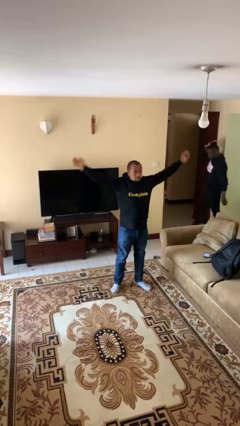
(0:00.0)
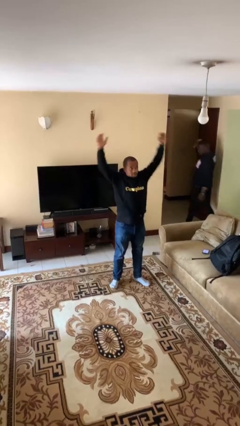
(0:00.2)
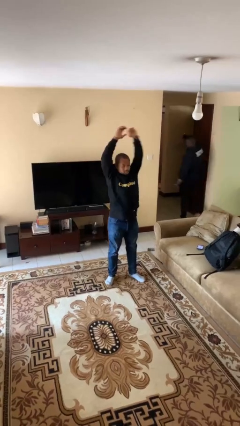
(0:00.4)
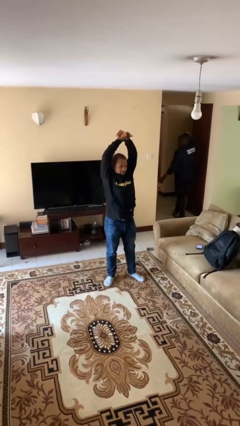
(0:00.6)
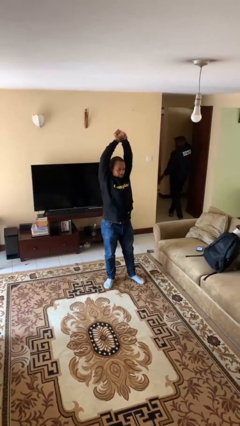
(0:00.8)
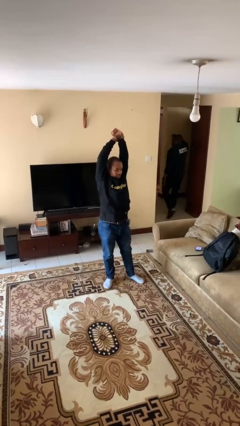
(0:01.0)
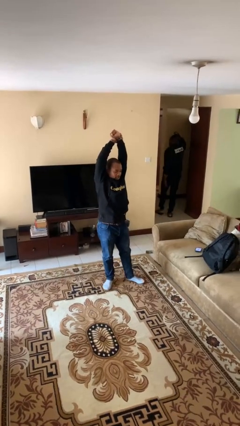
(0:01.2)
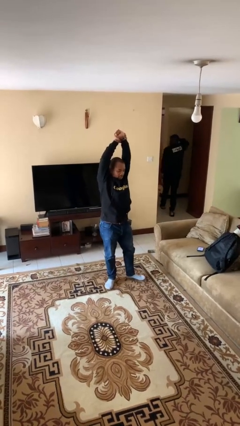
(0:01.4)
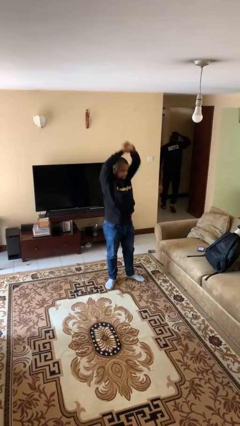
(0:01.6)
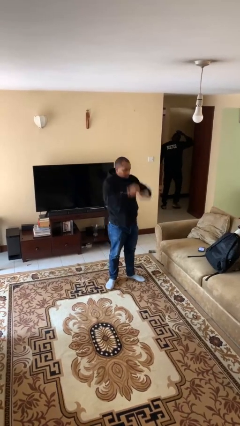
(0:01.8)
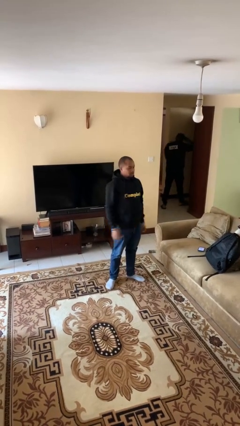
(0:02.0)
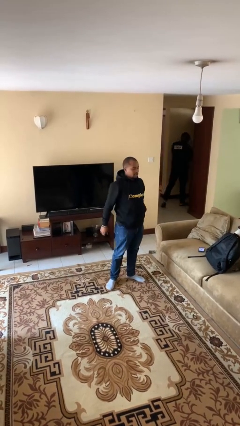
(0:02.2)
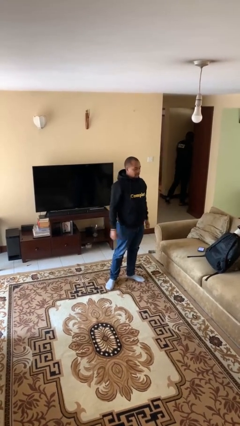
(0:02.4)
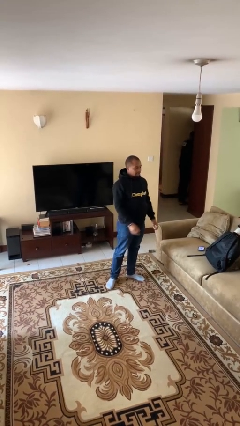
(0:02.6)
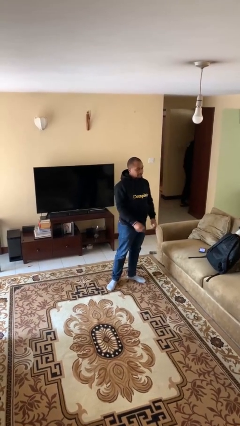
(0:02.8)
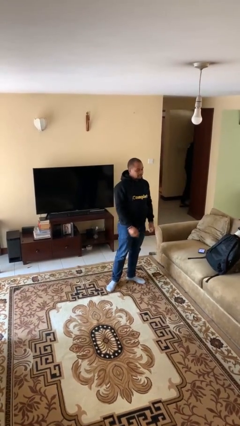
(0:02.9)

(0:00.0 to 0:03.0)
person stretches arms over head

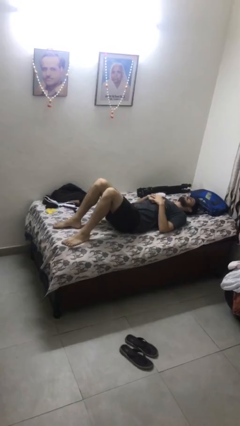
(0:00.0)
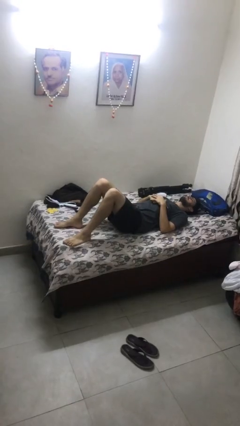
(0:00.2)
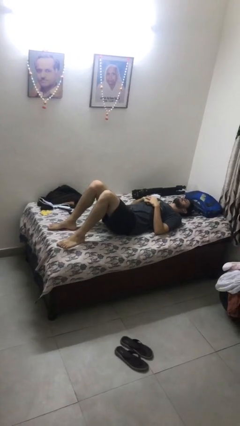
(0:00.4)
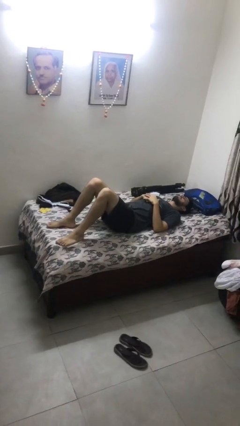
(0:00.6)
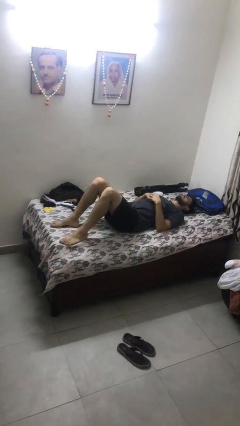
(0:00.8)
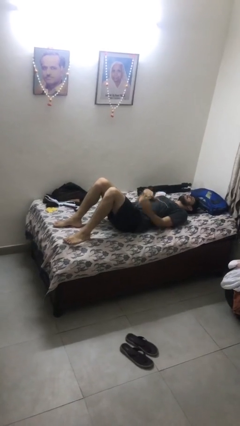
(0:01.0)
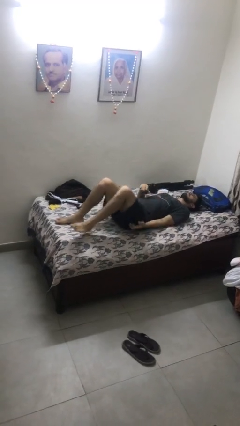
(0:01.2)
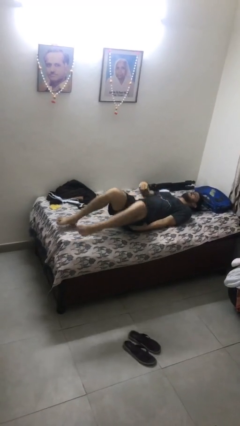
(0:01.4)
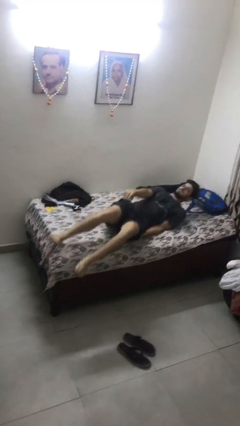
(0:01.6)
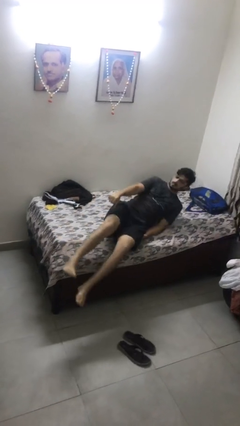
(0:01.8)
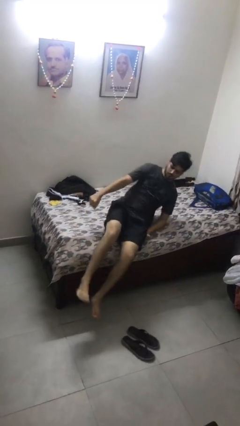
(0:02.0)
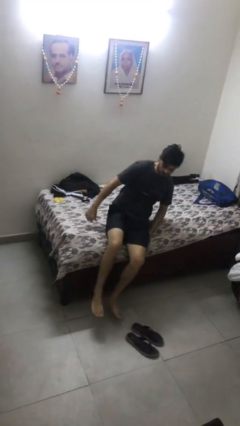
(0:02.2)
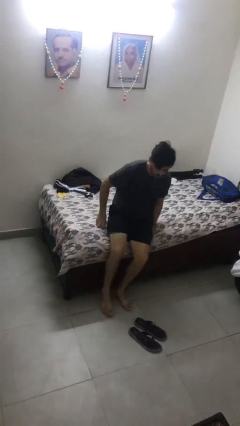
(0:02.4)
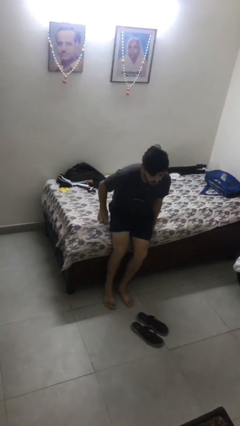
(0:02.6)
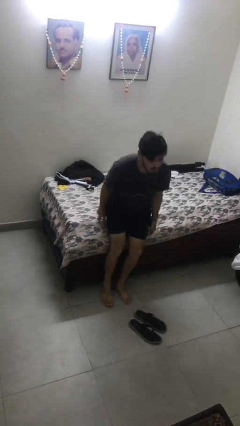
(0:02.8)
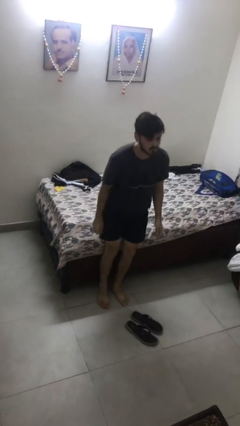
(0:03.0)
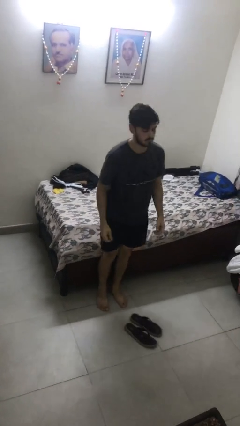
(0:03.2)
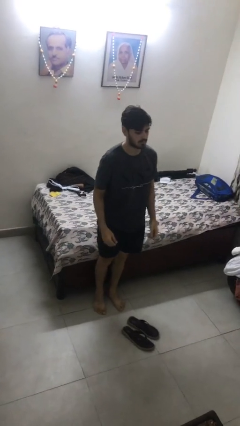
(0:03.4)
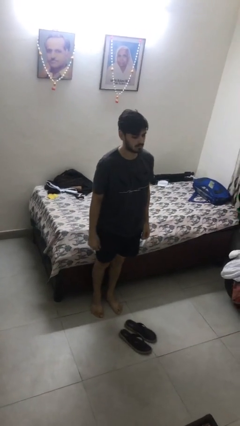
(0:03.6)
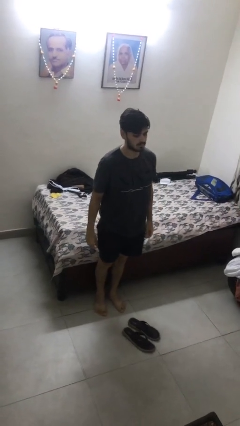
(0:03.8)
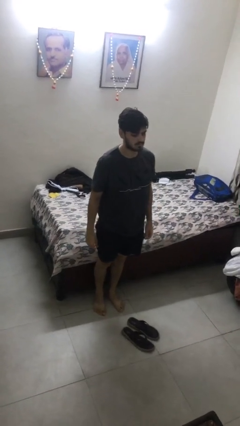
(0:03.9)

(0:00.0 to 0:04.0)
person stands up

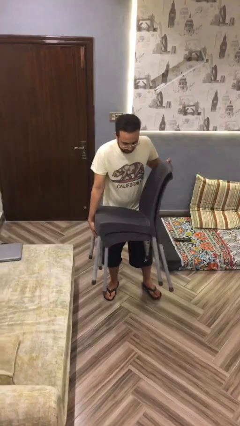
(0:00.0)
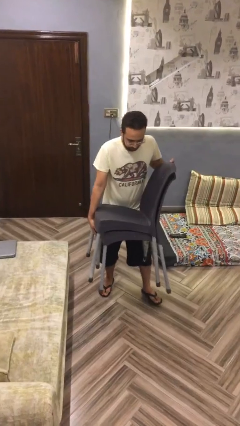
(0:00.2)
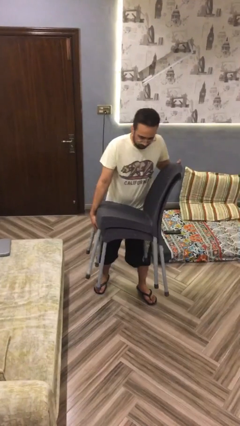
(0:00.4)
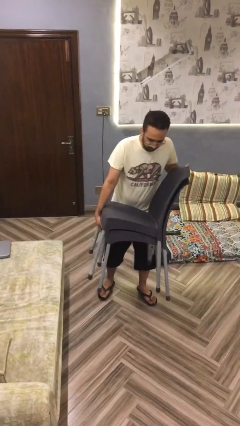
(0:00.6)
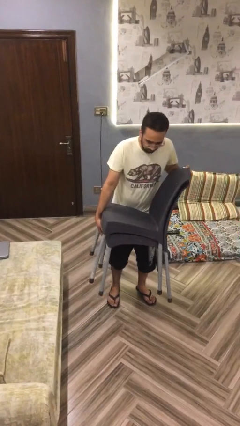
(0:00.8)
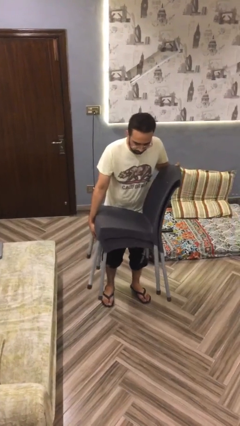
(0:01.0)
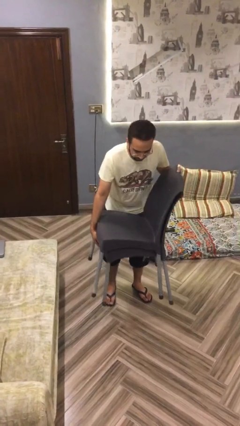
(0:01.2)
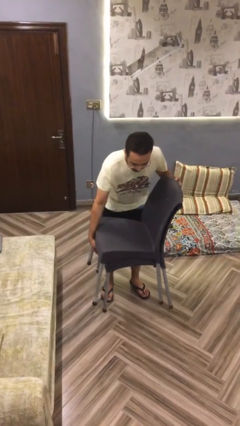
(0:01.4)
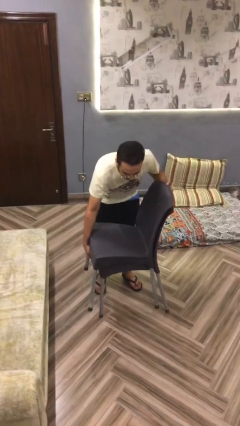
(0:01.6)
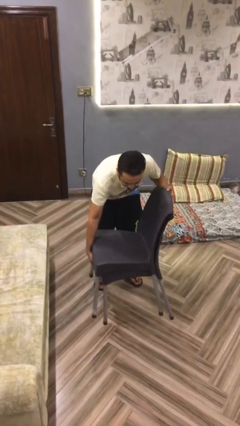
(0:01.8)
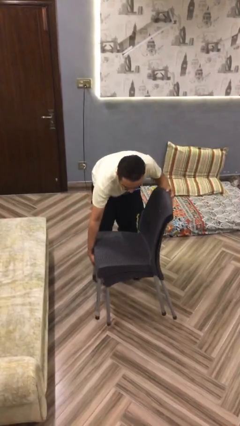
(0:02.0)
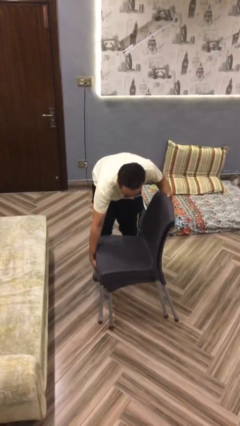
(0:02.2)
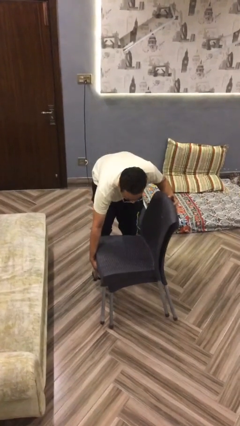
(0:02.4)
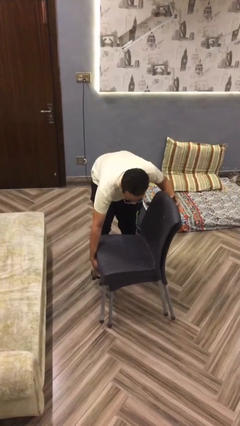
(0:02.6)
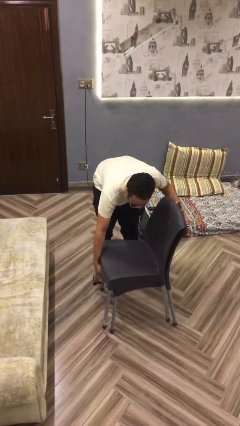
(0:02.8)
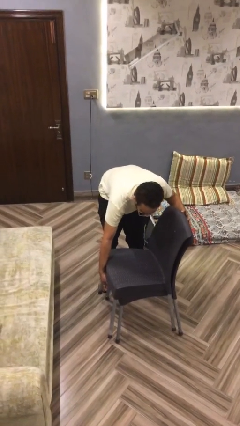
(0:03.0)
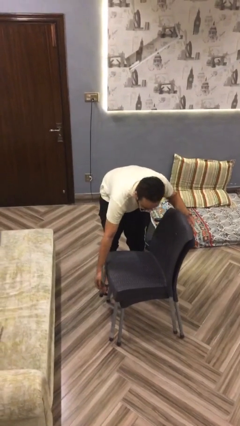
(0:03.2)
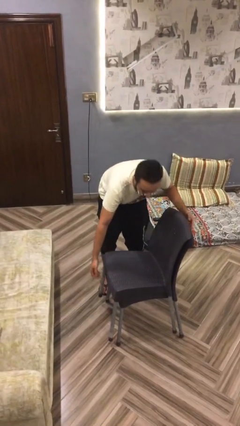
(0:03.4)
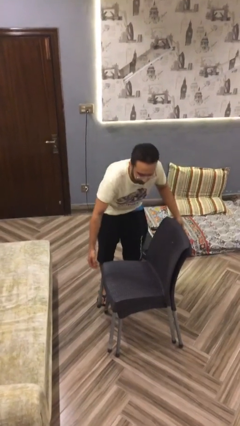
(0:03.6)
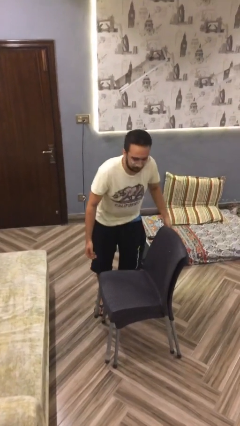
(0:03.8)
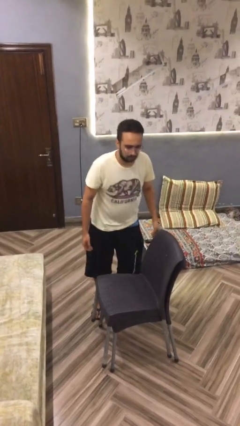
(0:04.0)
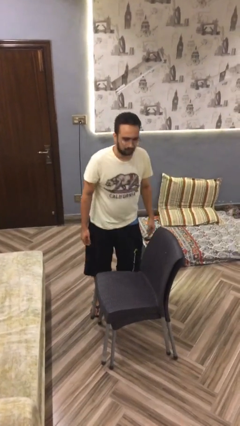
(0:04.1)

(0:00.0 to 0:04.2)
person puts down object on floor

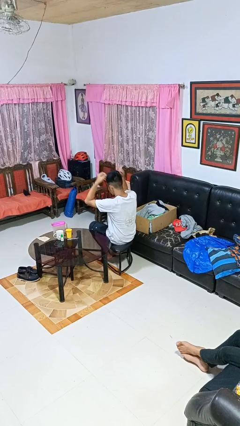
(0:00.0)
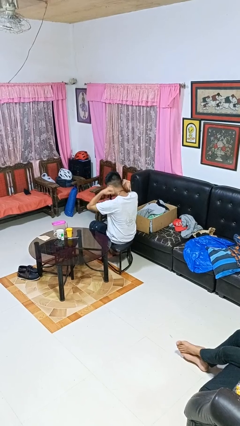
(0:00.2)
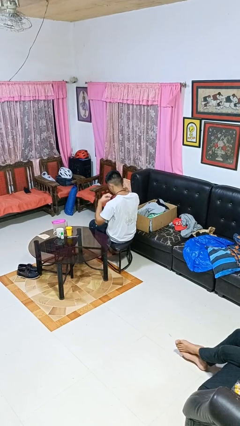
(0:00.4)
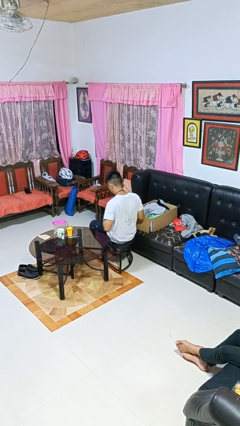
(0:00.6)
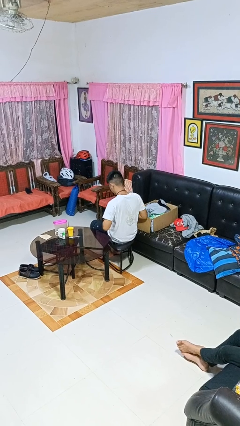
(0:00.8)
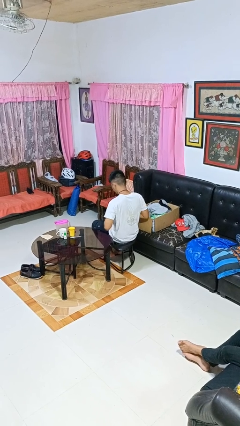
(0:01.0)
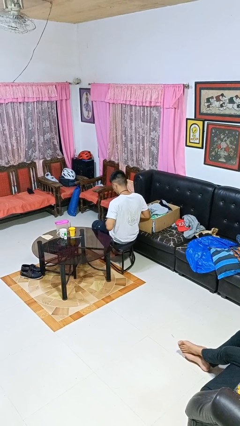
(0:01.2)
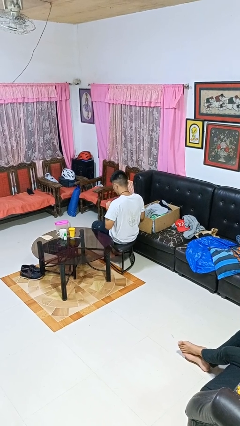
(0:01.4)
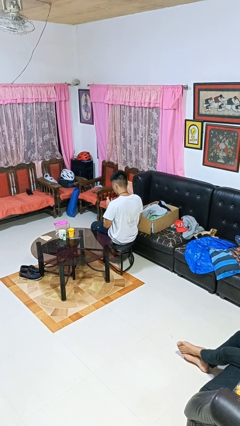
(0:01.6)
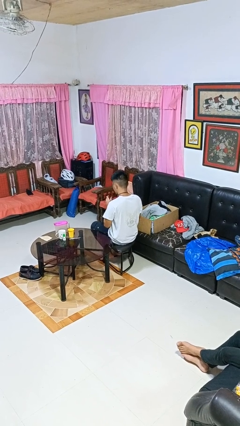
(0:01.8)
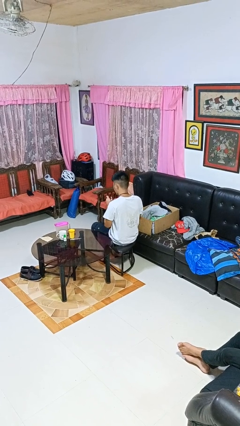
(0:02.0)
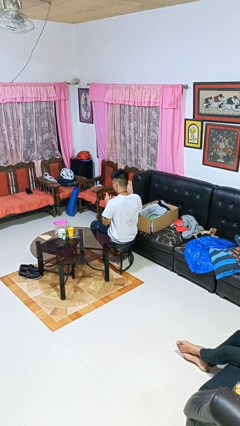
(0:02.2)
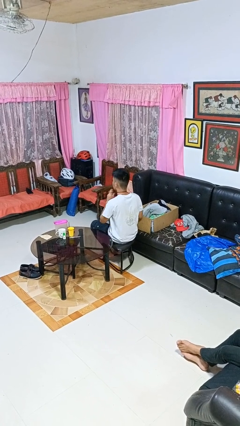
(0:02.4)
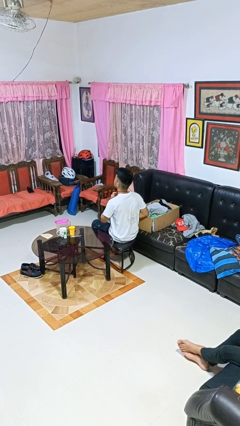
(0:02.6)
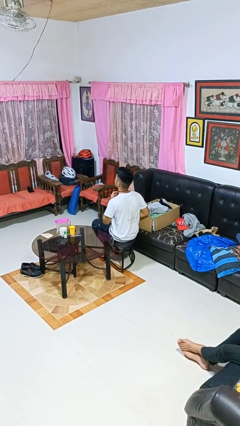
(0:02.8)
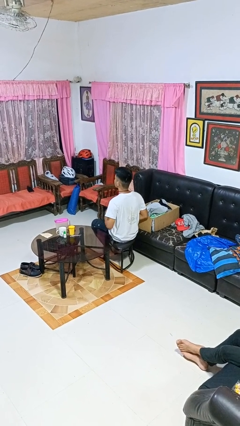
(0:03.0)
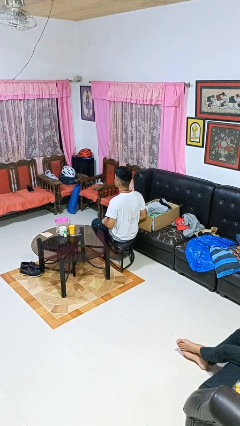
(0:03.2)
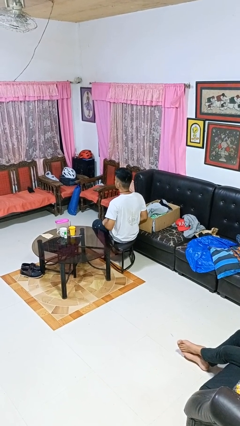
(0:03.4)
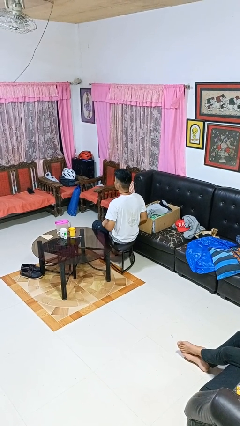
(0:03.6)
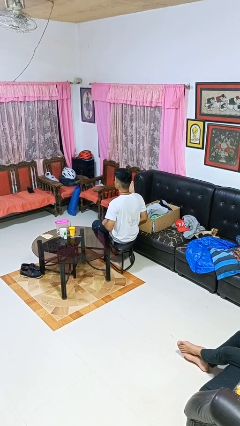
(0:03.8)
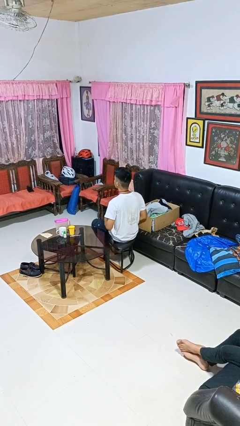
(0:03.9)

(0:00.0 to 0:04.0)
person puts on necktie

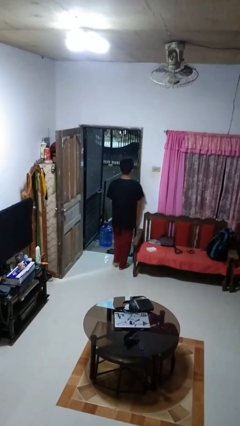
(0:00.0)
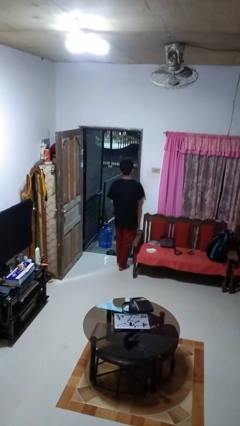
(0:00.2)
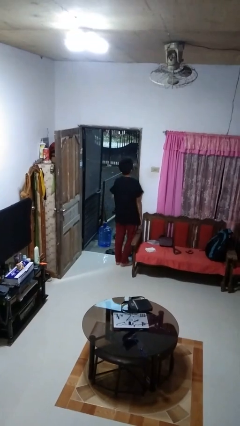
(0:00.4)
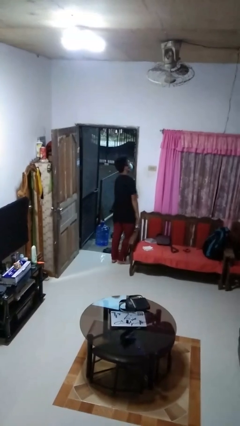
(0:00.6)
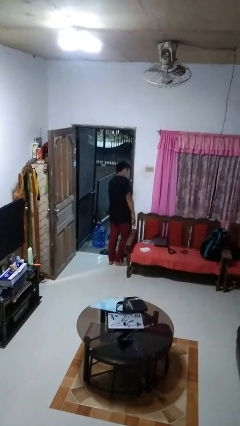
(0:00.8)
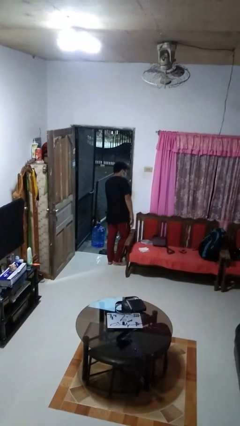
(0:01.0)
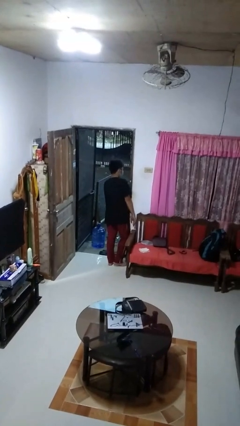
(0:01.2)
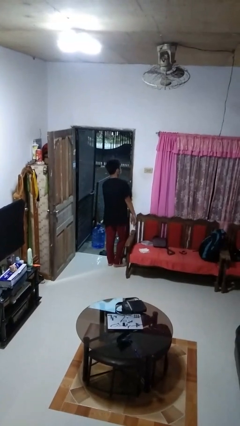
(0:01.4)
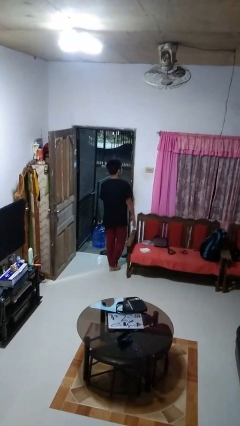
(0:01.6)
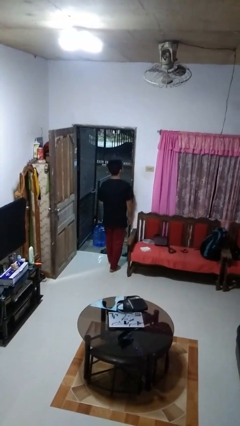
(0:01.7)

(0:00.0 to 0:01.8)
person bumps into wall

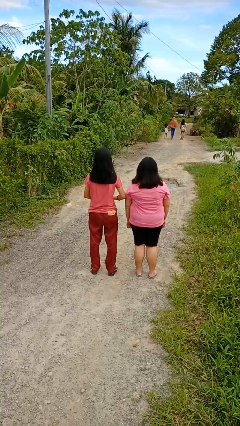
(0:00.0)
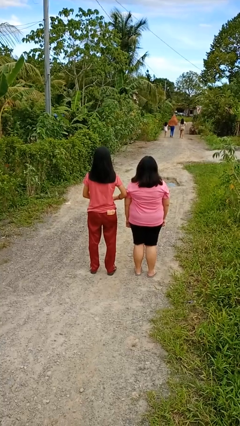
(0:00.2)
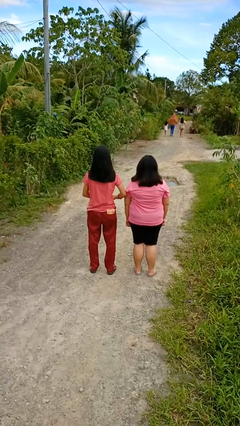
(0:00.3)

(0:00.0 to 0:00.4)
person nudges person with elbow
